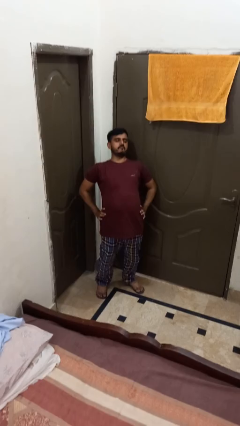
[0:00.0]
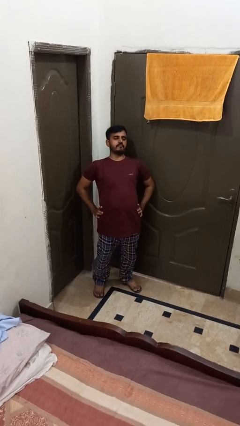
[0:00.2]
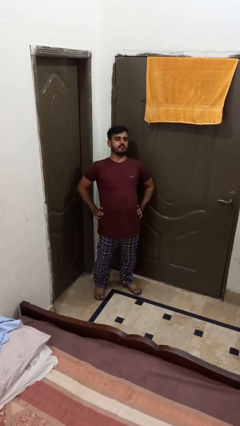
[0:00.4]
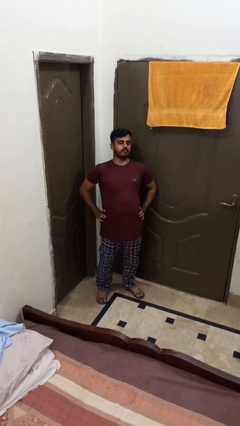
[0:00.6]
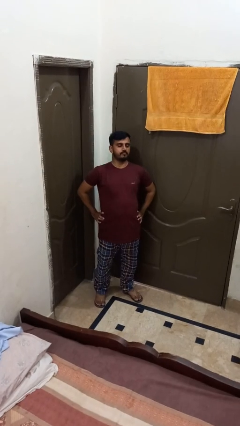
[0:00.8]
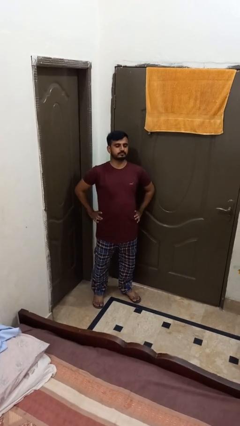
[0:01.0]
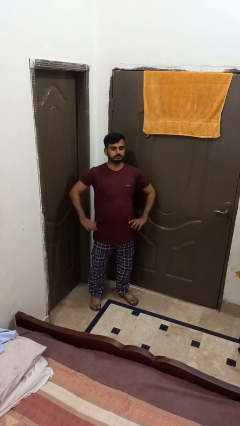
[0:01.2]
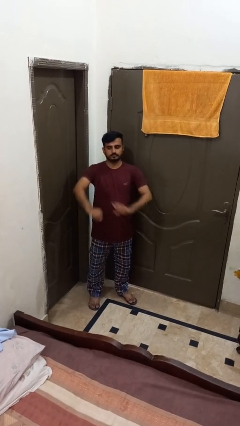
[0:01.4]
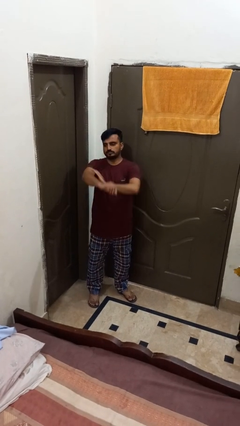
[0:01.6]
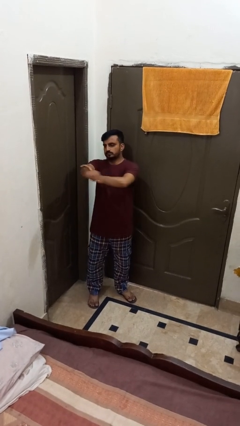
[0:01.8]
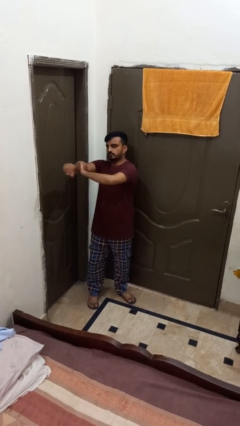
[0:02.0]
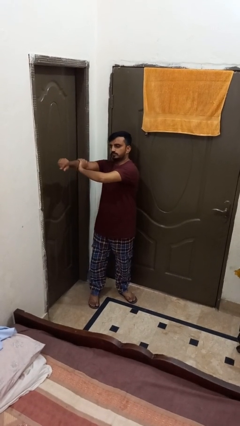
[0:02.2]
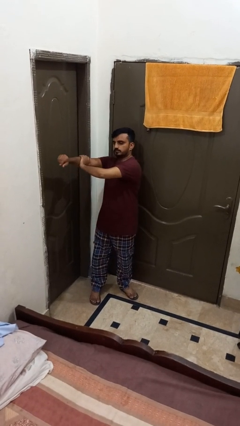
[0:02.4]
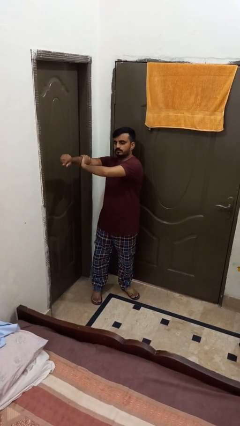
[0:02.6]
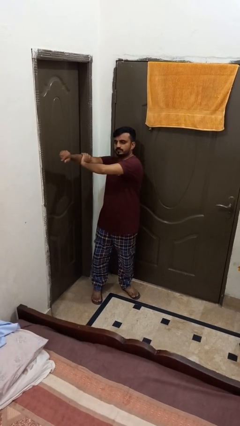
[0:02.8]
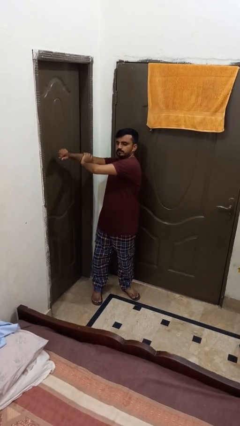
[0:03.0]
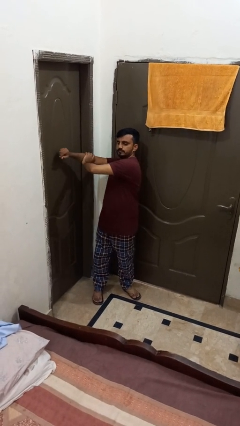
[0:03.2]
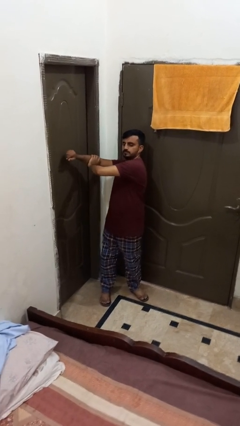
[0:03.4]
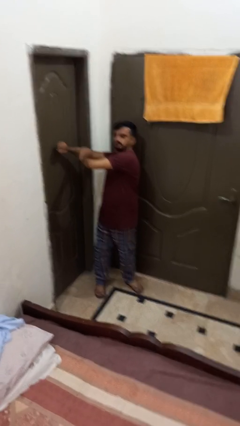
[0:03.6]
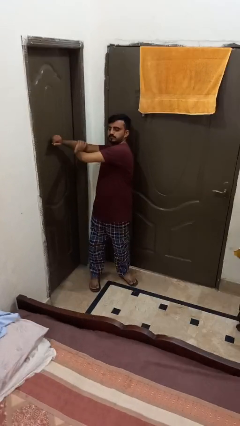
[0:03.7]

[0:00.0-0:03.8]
person stretches arms to side

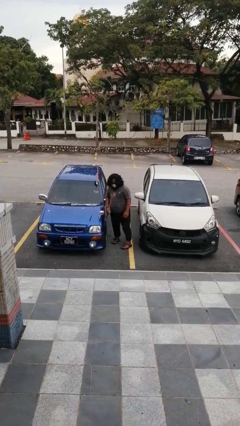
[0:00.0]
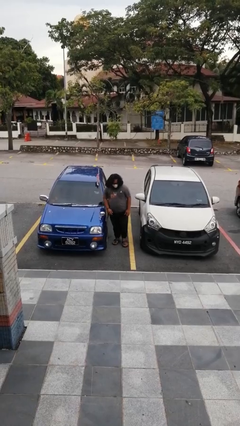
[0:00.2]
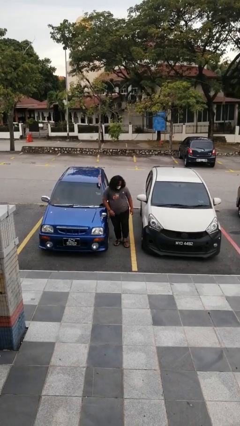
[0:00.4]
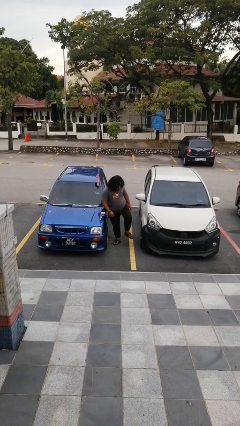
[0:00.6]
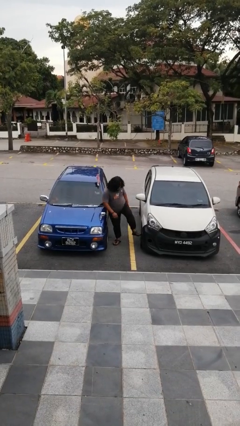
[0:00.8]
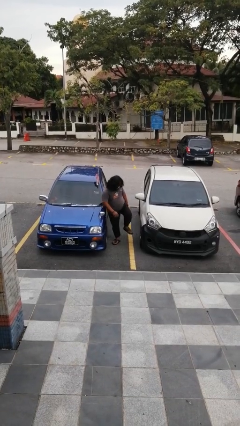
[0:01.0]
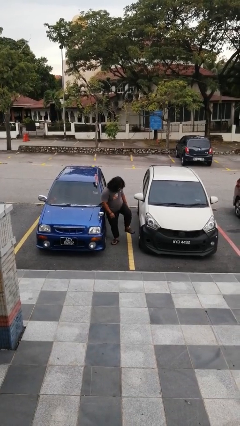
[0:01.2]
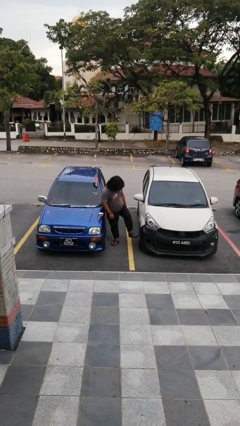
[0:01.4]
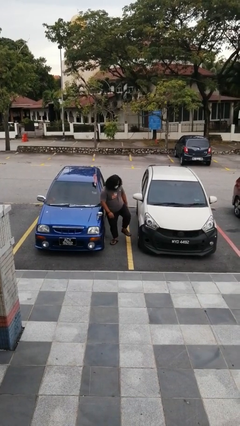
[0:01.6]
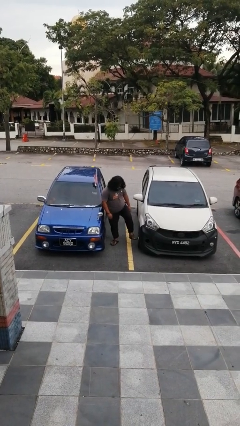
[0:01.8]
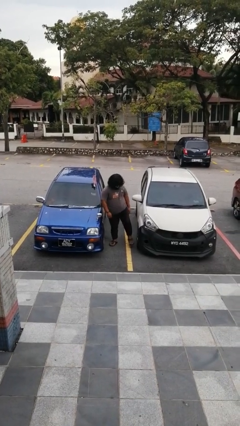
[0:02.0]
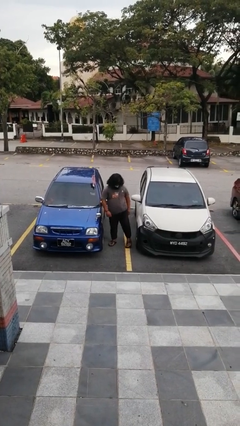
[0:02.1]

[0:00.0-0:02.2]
person kicks car tires

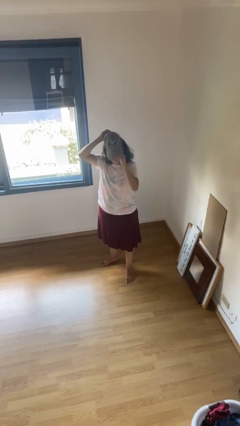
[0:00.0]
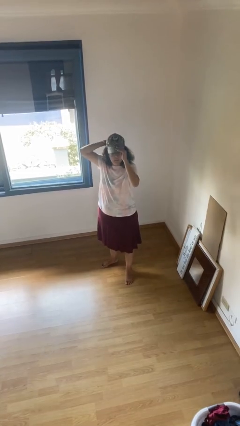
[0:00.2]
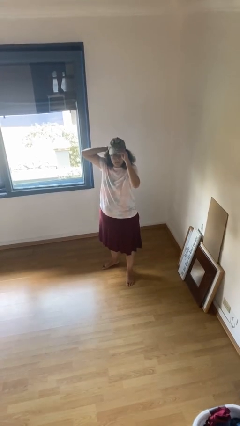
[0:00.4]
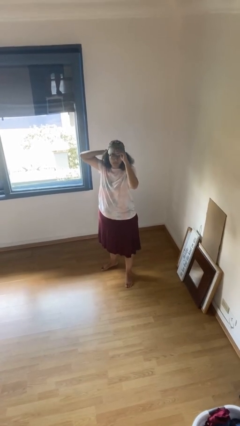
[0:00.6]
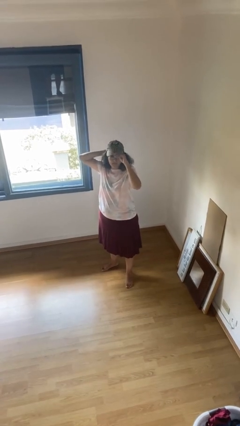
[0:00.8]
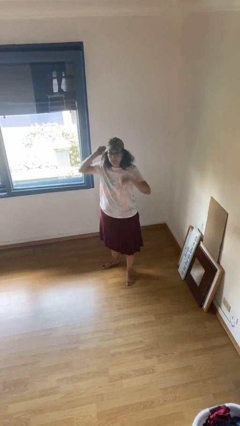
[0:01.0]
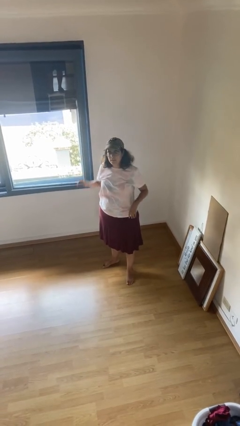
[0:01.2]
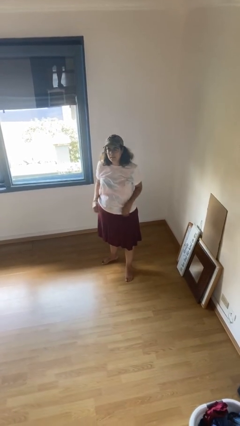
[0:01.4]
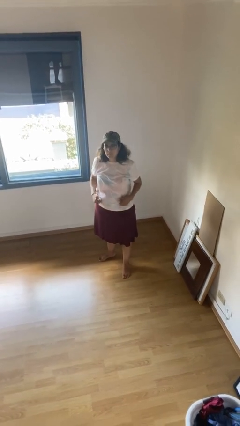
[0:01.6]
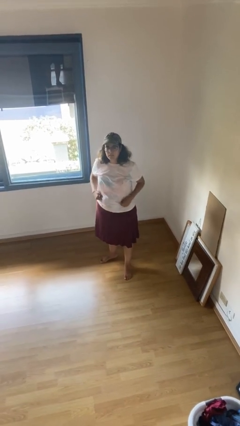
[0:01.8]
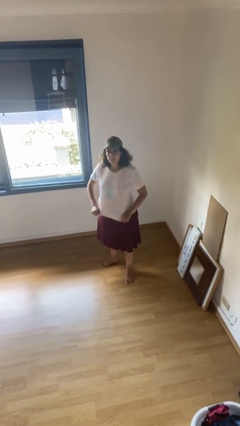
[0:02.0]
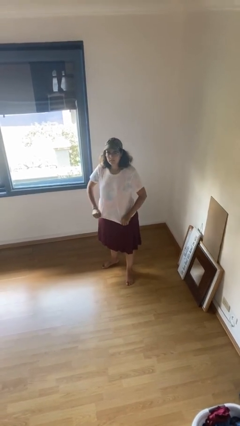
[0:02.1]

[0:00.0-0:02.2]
person puts on hat

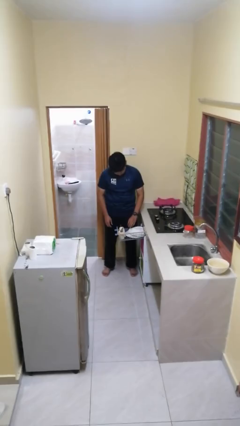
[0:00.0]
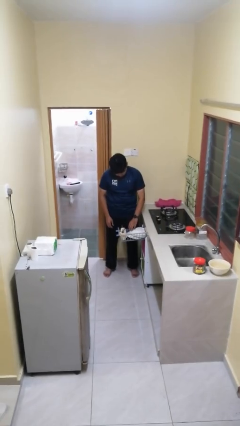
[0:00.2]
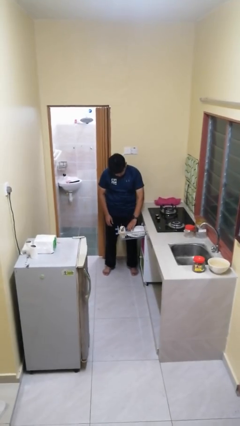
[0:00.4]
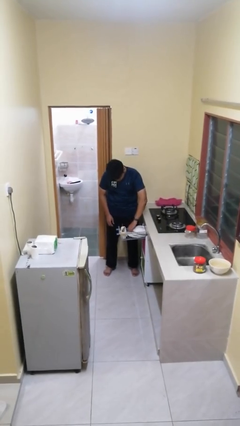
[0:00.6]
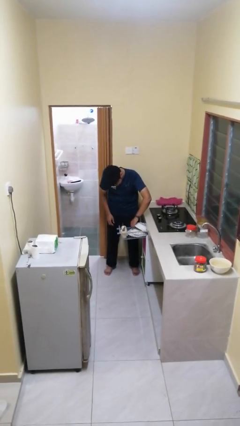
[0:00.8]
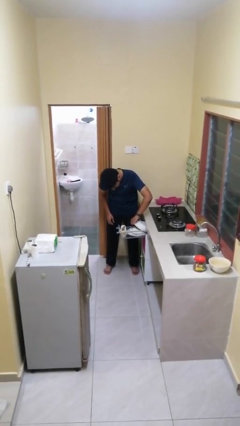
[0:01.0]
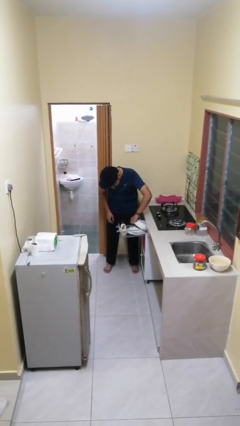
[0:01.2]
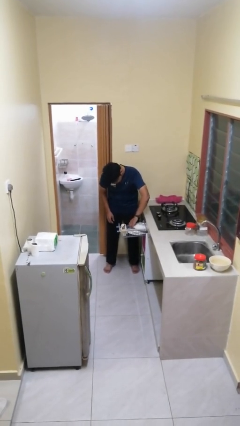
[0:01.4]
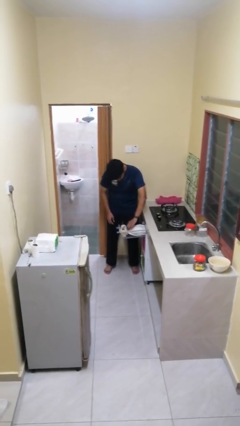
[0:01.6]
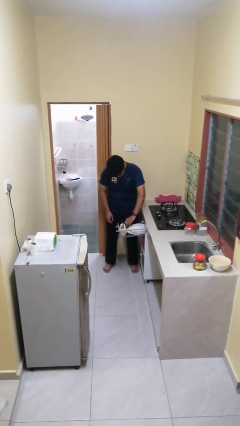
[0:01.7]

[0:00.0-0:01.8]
person searches in kitchen drawer

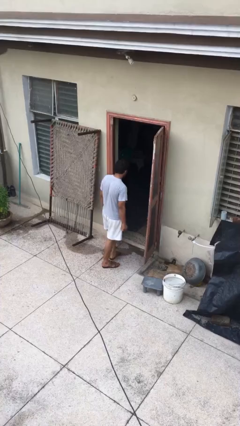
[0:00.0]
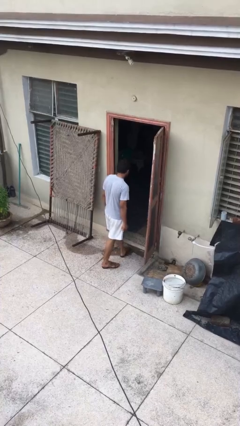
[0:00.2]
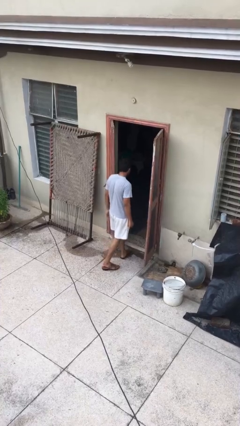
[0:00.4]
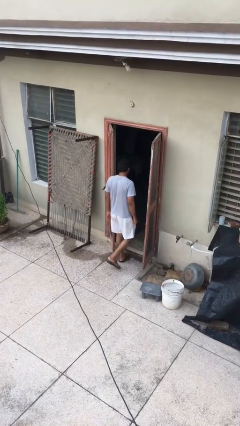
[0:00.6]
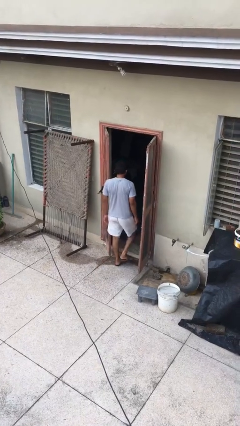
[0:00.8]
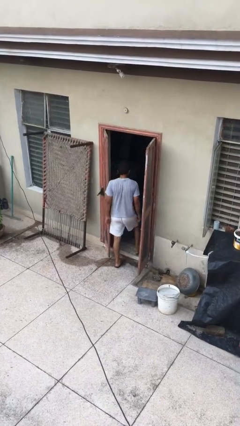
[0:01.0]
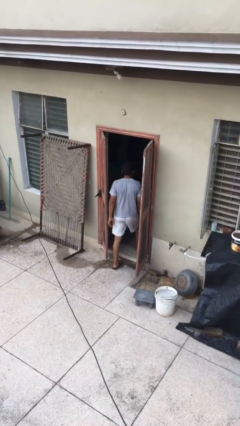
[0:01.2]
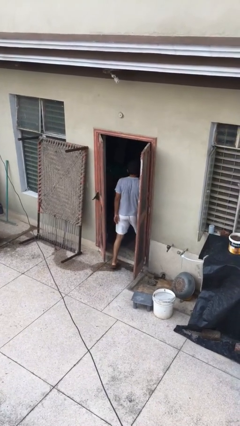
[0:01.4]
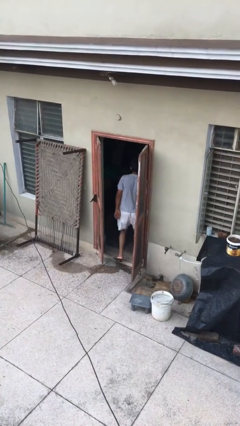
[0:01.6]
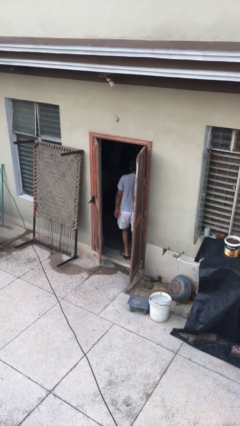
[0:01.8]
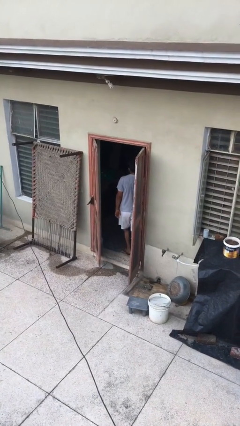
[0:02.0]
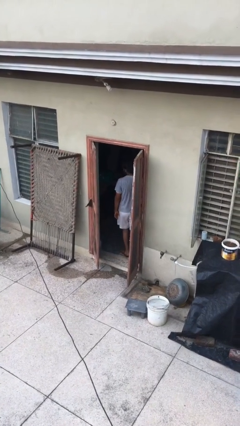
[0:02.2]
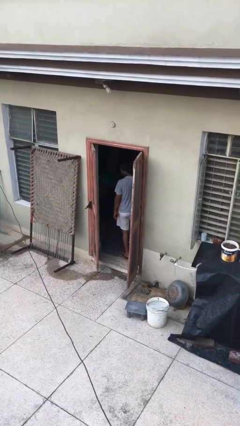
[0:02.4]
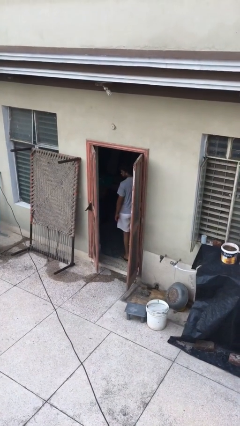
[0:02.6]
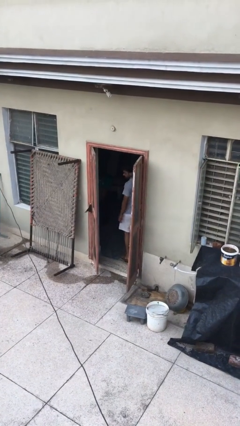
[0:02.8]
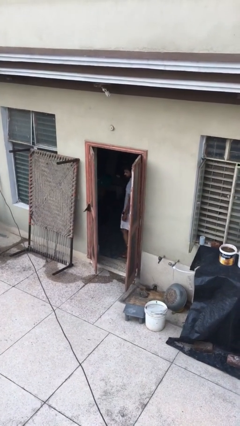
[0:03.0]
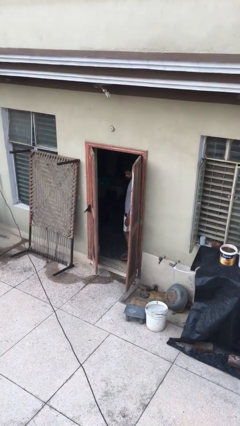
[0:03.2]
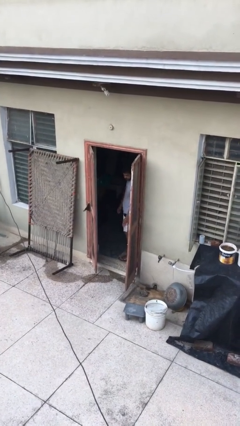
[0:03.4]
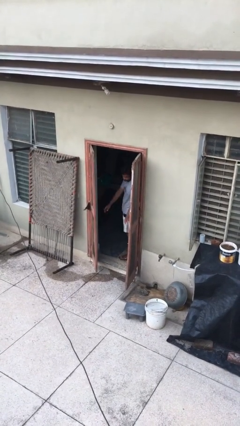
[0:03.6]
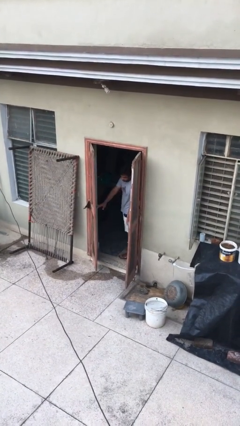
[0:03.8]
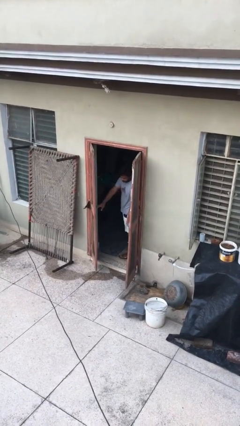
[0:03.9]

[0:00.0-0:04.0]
person exits scene through structure

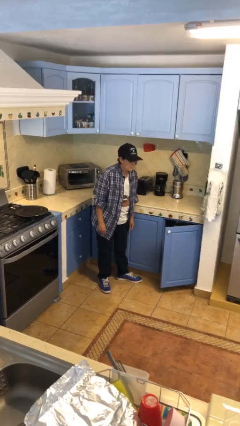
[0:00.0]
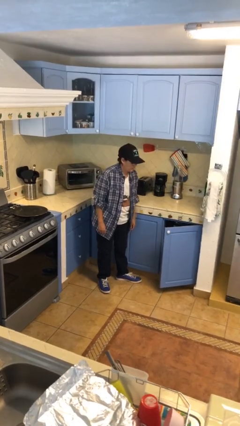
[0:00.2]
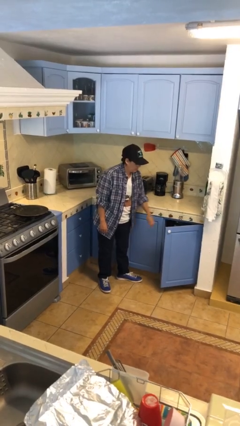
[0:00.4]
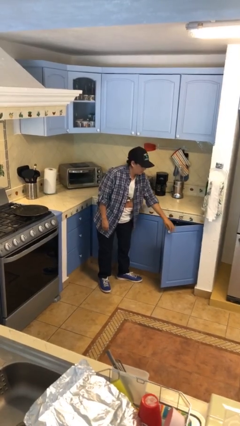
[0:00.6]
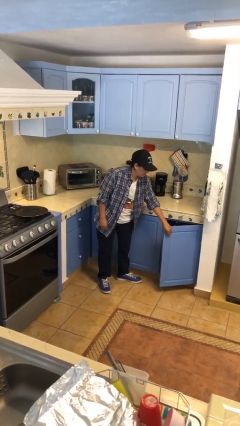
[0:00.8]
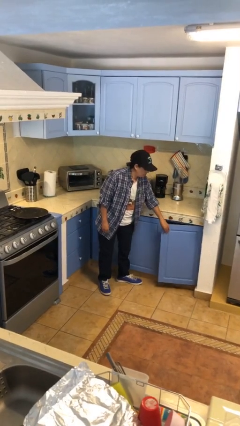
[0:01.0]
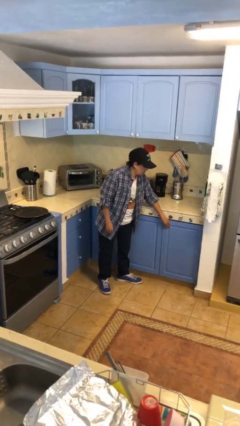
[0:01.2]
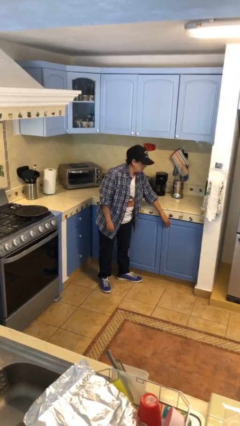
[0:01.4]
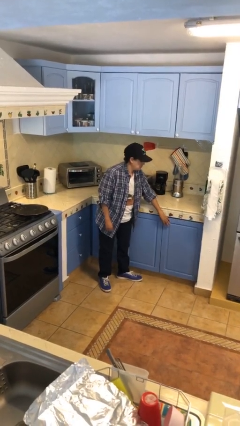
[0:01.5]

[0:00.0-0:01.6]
person closes cabinet

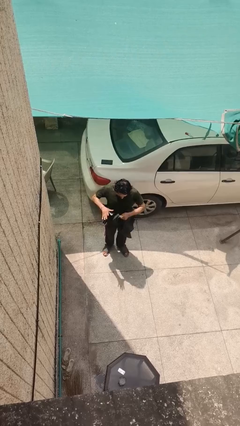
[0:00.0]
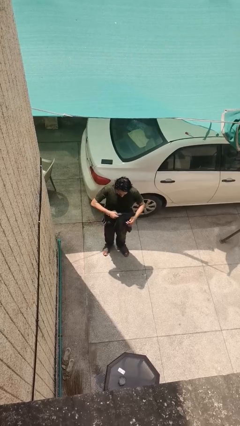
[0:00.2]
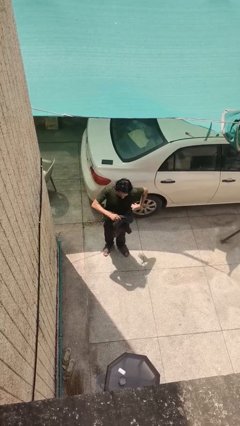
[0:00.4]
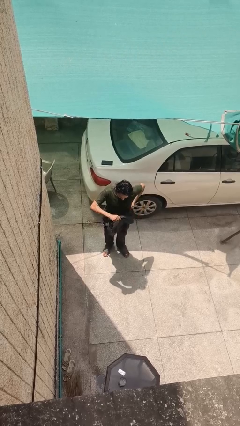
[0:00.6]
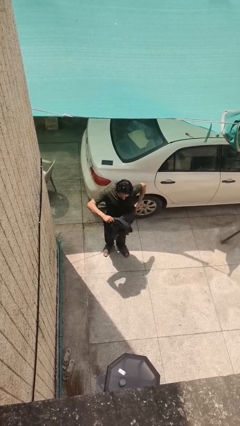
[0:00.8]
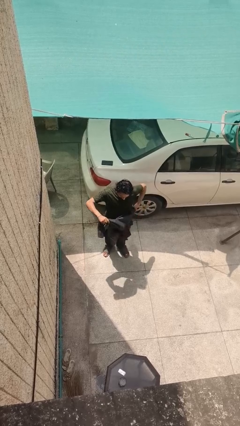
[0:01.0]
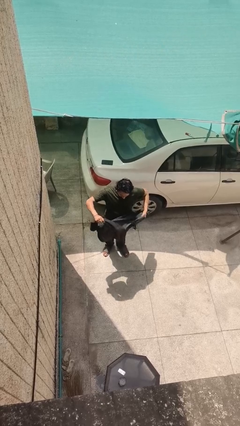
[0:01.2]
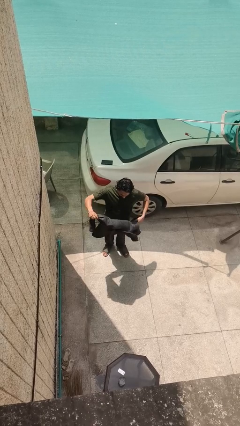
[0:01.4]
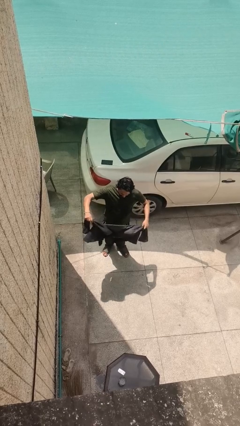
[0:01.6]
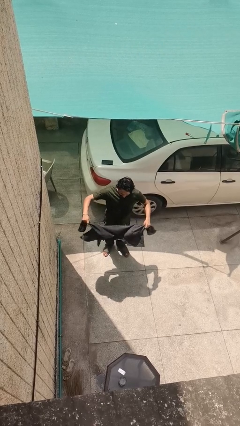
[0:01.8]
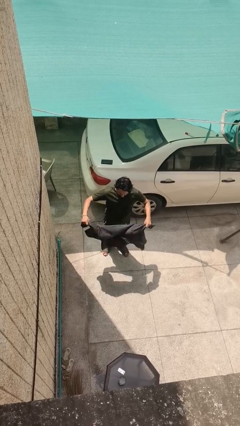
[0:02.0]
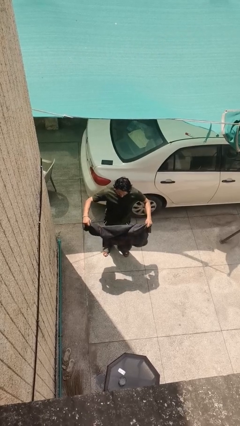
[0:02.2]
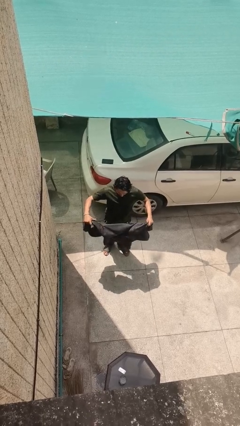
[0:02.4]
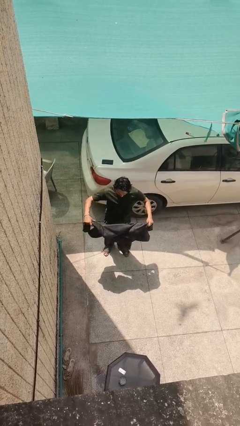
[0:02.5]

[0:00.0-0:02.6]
person unties jacket around waist
